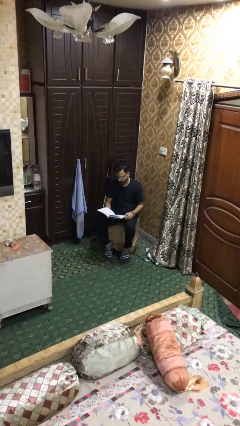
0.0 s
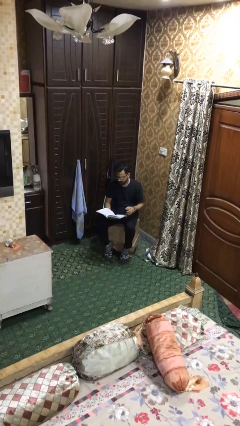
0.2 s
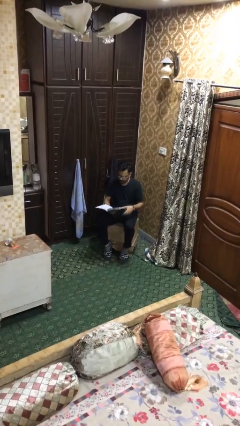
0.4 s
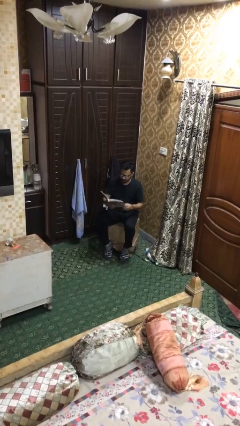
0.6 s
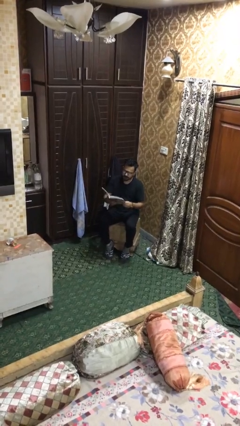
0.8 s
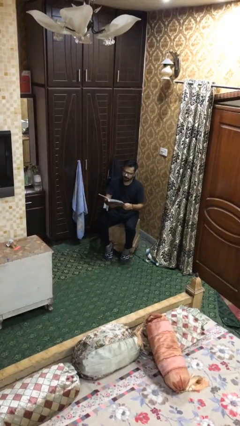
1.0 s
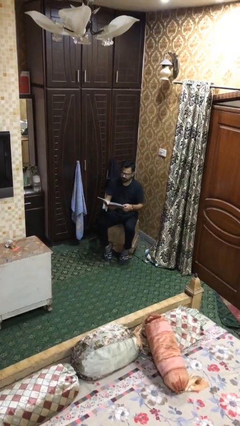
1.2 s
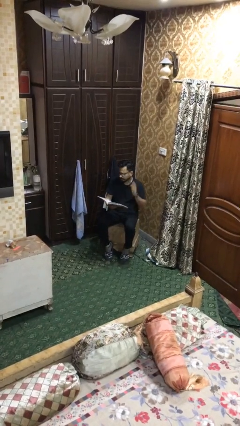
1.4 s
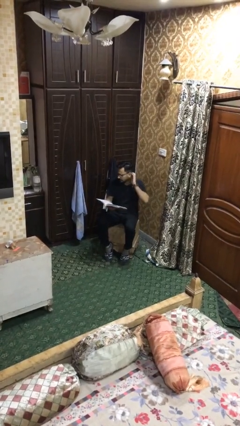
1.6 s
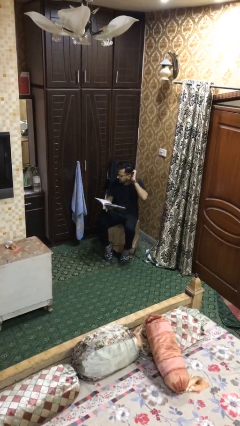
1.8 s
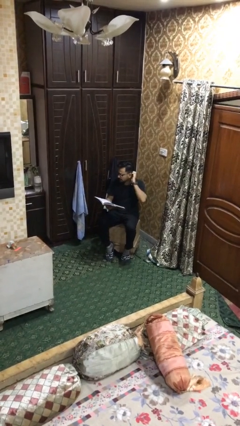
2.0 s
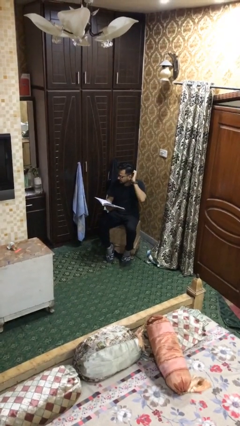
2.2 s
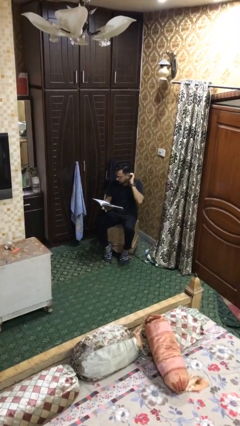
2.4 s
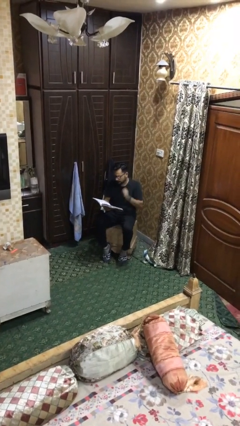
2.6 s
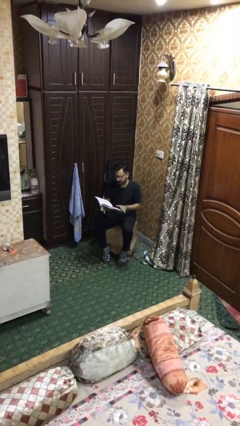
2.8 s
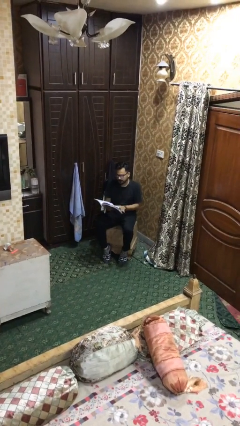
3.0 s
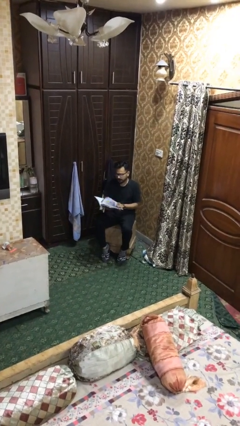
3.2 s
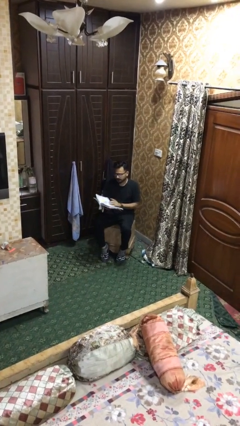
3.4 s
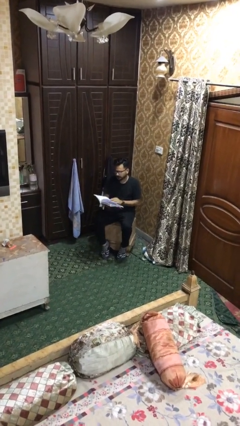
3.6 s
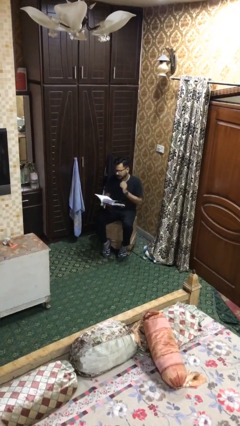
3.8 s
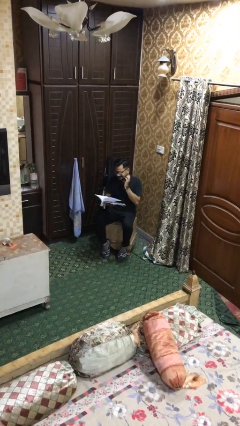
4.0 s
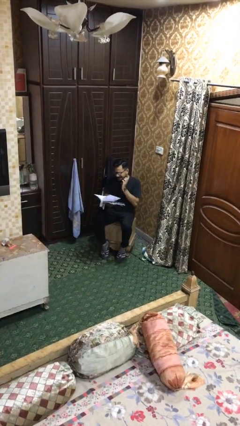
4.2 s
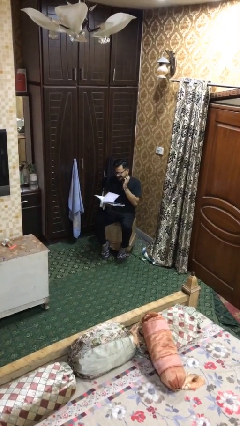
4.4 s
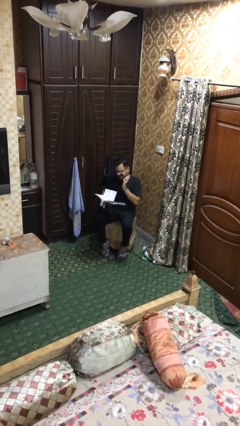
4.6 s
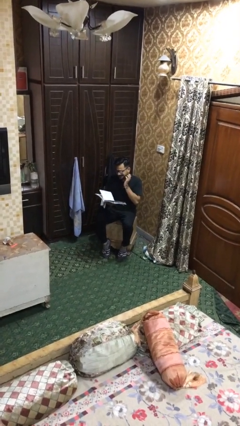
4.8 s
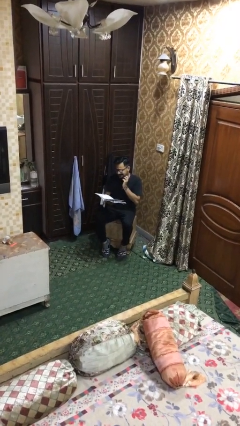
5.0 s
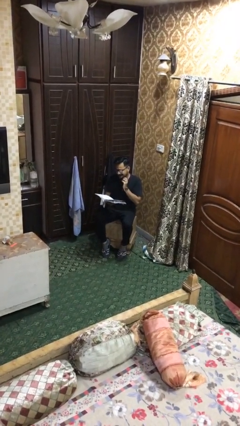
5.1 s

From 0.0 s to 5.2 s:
person reads document

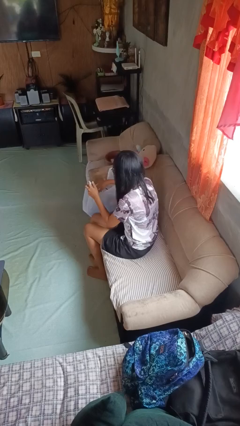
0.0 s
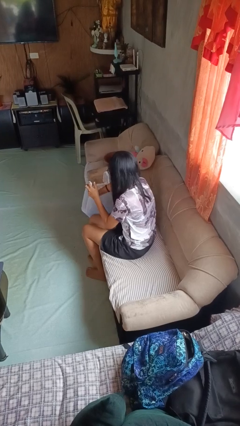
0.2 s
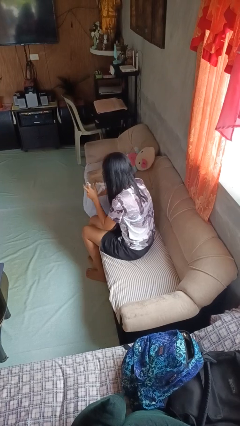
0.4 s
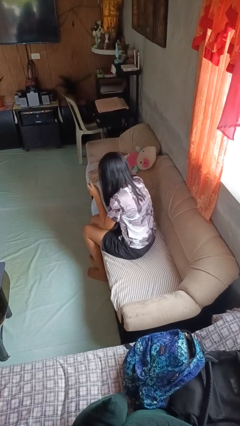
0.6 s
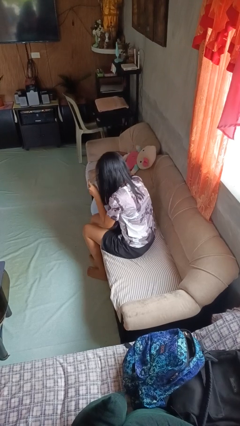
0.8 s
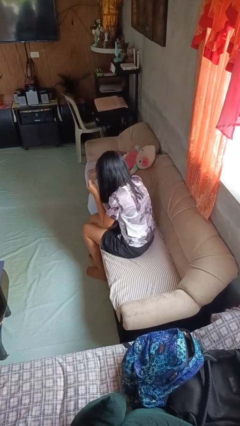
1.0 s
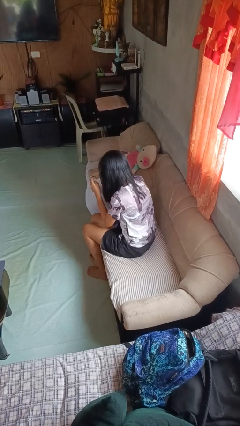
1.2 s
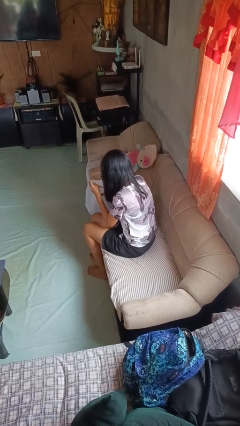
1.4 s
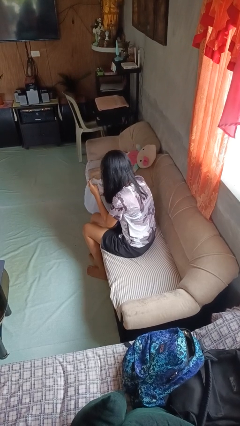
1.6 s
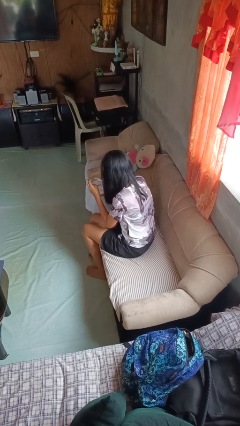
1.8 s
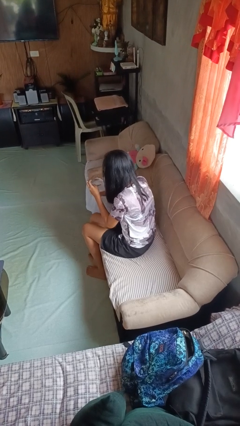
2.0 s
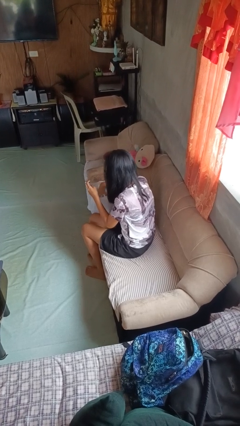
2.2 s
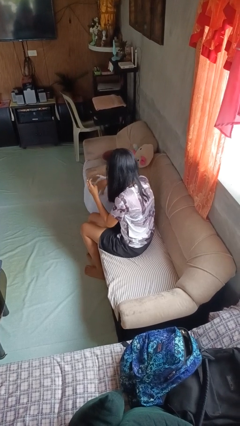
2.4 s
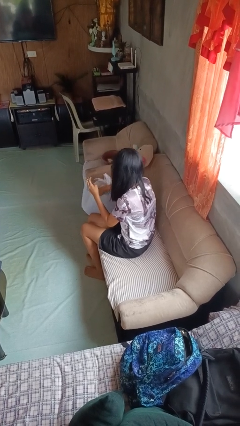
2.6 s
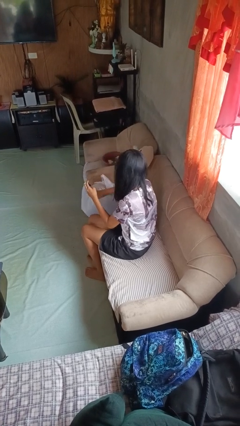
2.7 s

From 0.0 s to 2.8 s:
person searches in bag

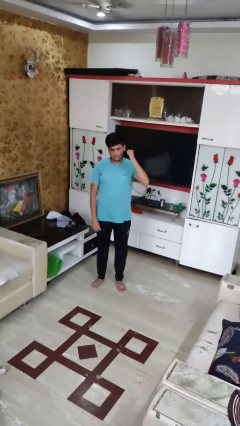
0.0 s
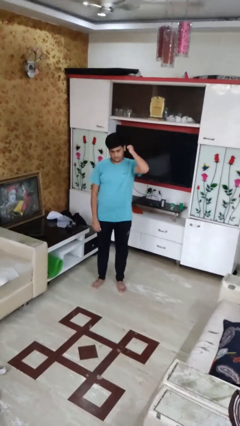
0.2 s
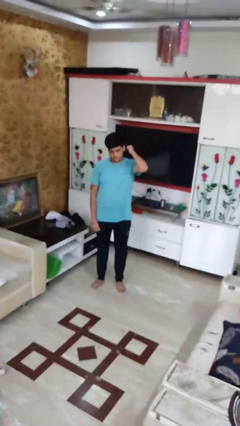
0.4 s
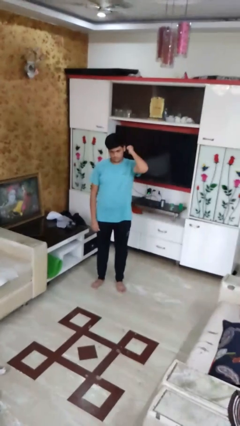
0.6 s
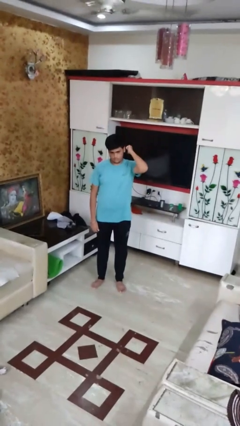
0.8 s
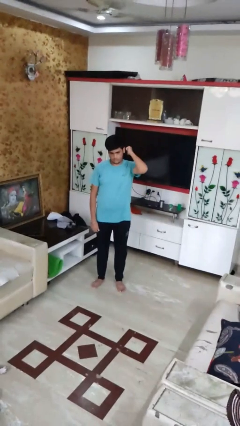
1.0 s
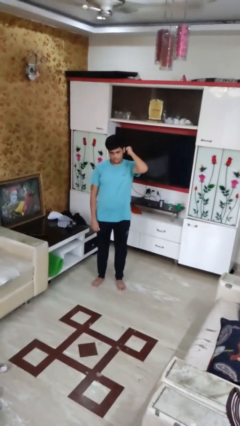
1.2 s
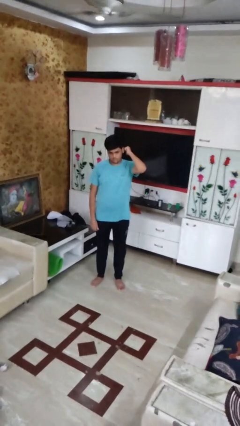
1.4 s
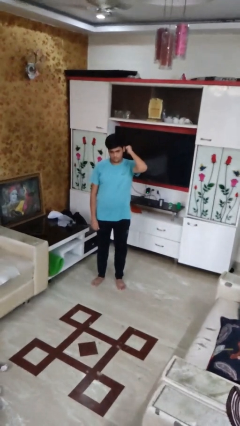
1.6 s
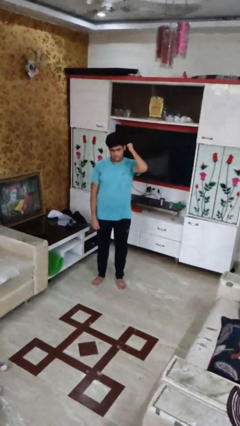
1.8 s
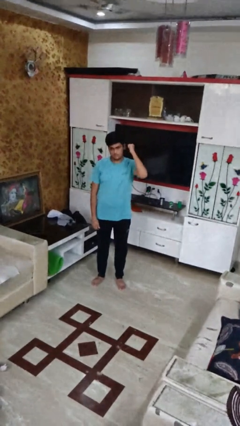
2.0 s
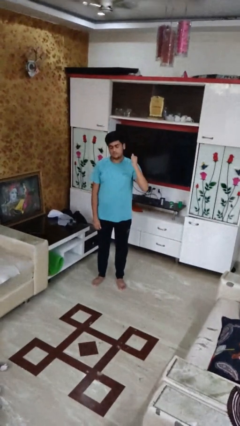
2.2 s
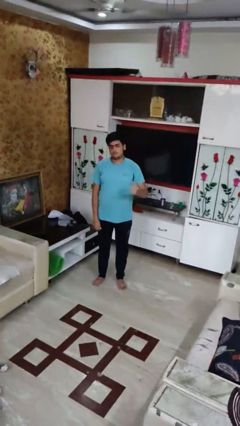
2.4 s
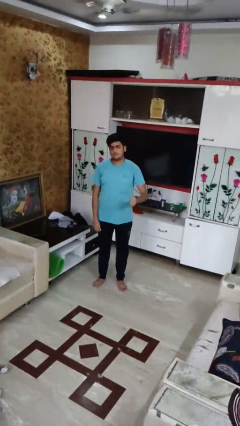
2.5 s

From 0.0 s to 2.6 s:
person gestures behind me

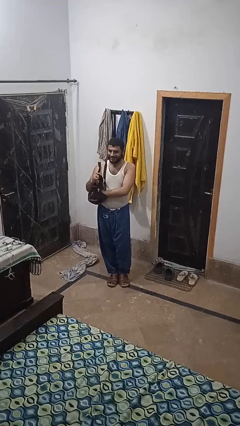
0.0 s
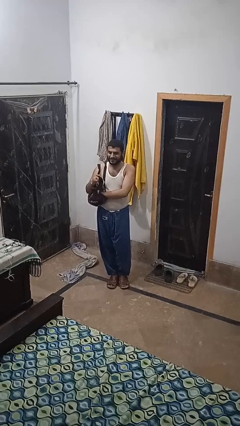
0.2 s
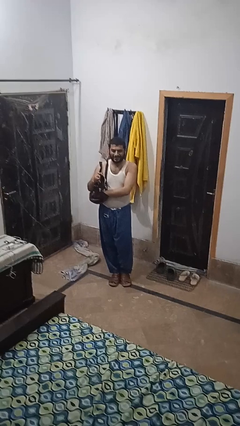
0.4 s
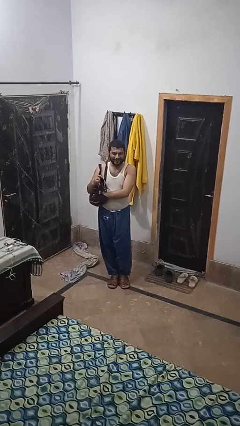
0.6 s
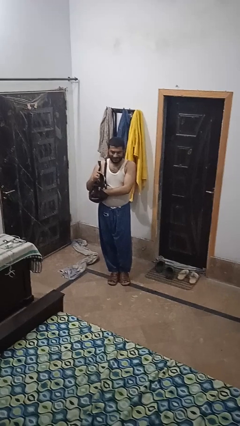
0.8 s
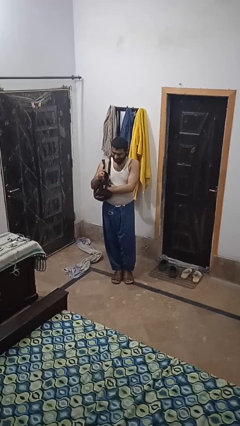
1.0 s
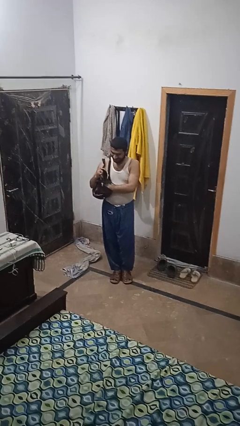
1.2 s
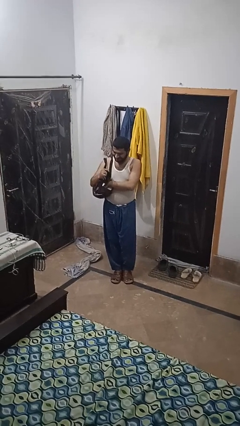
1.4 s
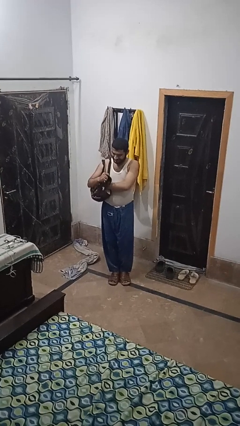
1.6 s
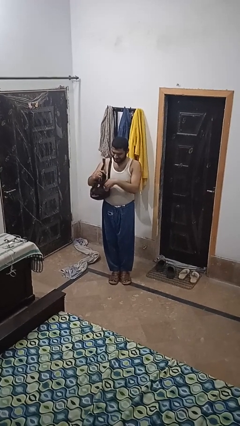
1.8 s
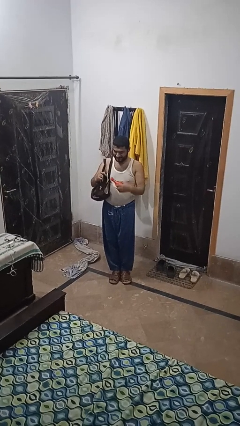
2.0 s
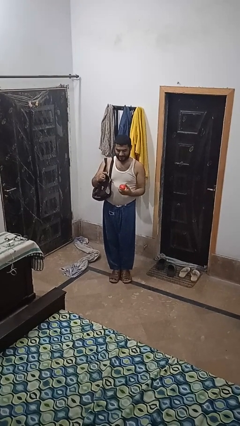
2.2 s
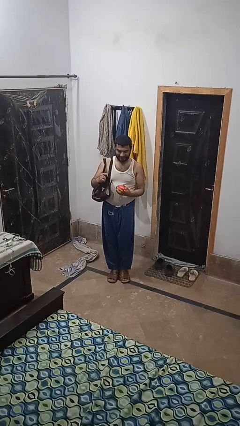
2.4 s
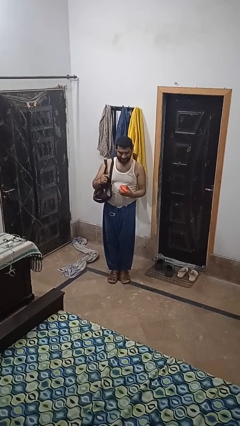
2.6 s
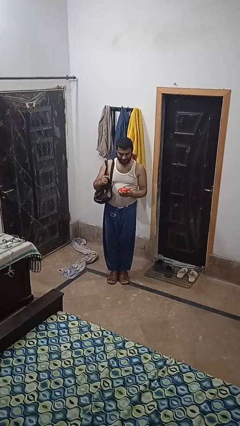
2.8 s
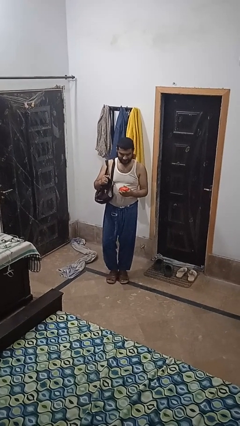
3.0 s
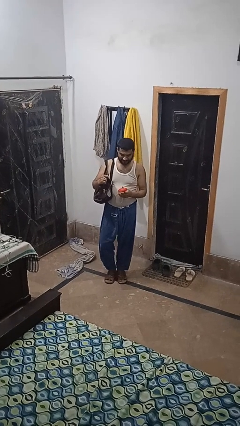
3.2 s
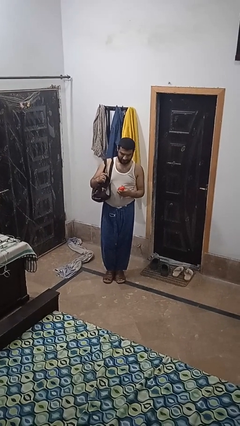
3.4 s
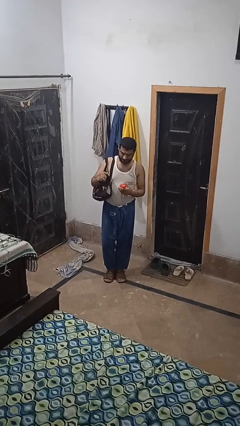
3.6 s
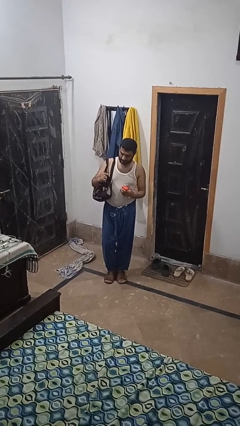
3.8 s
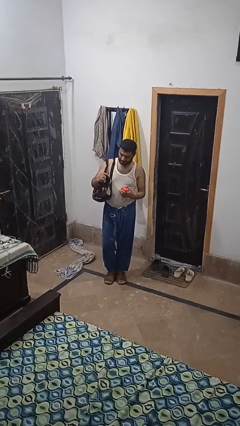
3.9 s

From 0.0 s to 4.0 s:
person takes object from purse

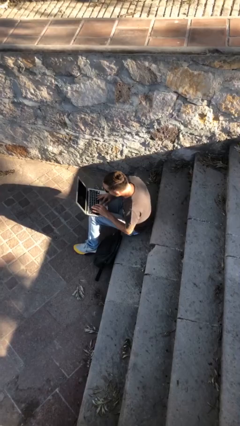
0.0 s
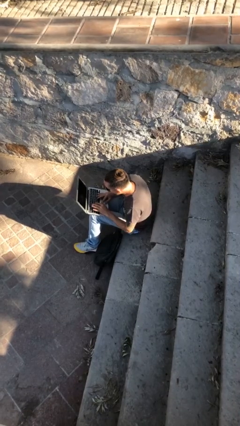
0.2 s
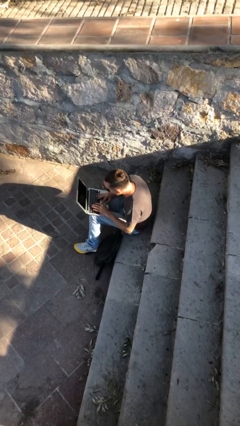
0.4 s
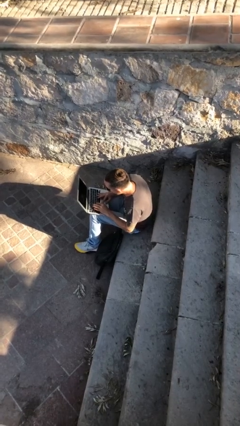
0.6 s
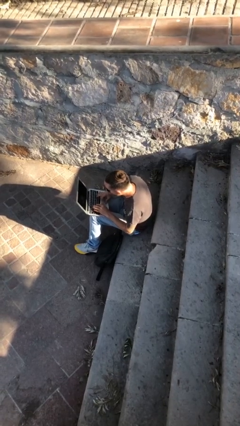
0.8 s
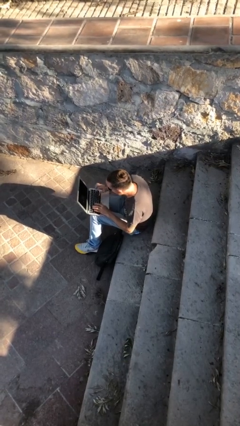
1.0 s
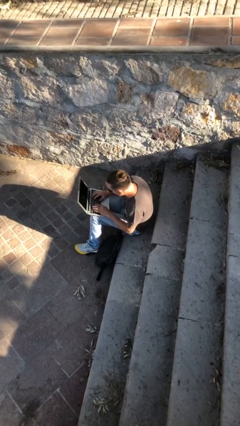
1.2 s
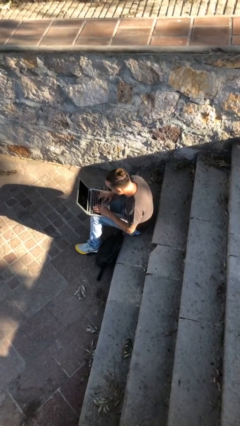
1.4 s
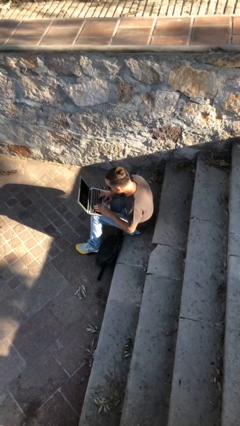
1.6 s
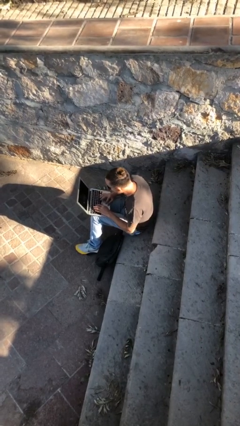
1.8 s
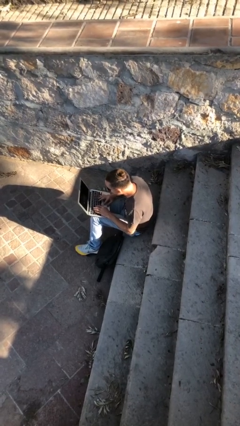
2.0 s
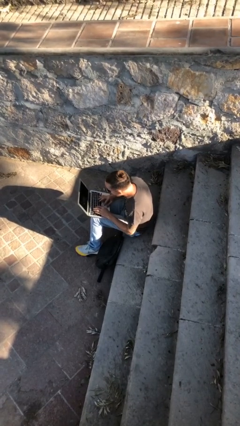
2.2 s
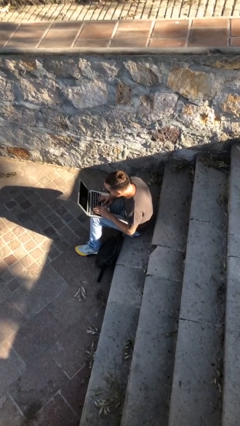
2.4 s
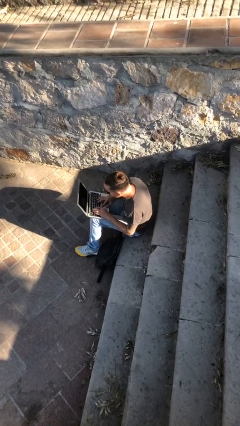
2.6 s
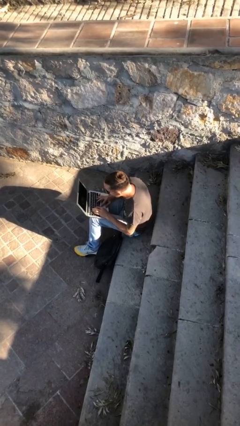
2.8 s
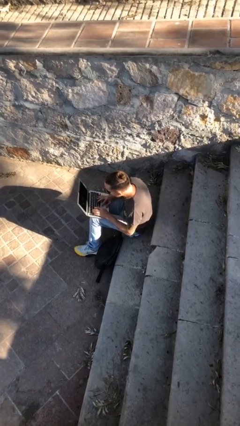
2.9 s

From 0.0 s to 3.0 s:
person interacts with laptop
